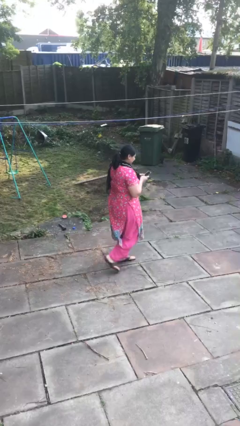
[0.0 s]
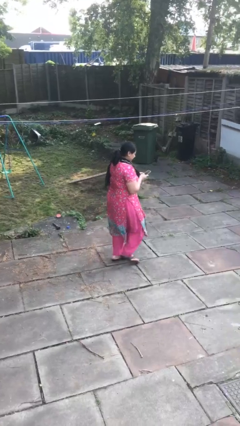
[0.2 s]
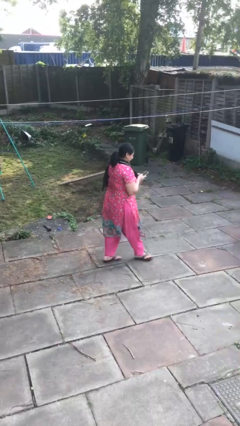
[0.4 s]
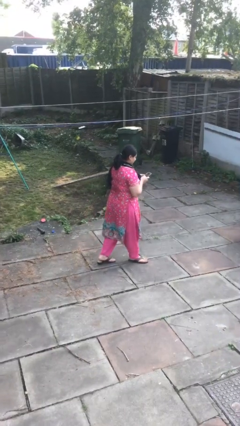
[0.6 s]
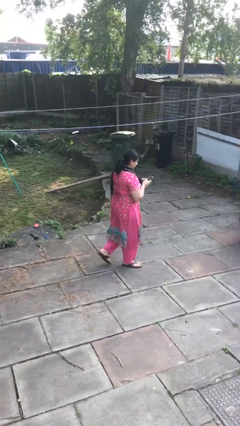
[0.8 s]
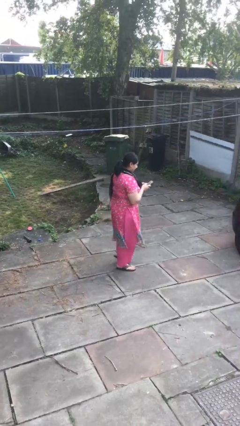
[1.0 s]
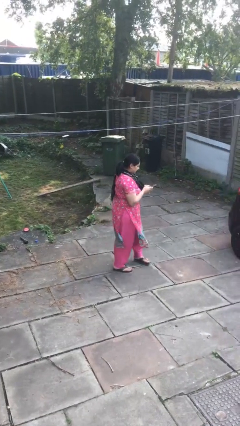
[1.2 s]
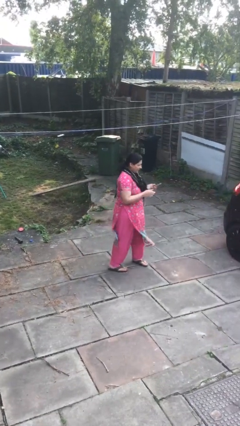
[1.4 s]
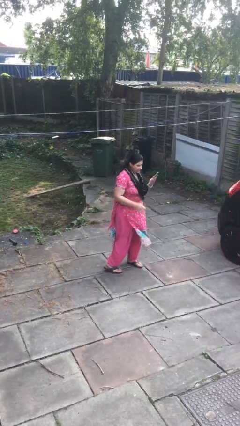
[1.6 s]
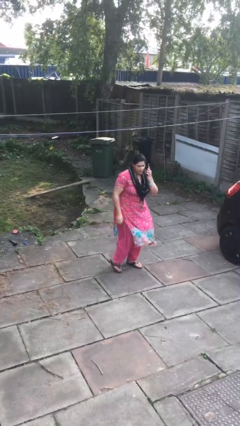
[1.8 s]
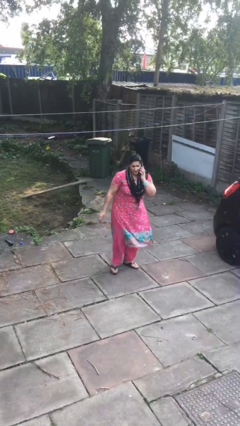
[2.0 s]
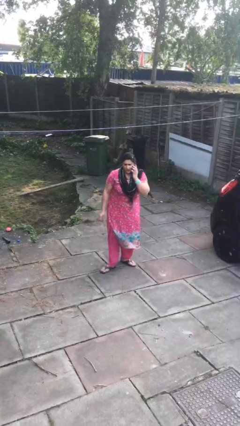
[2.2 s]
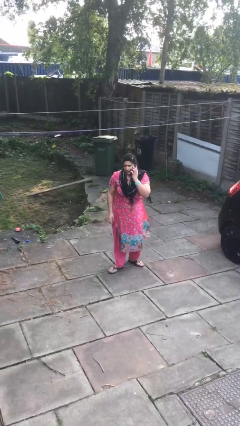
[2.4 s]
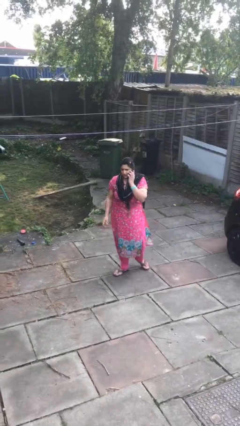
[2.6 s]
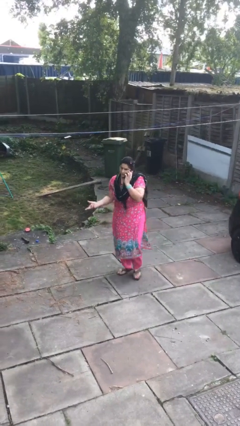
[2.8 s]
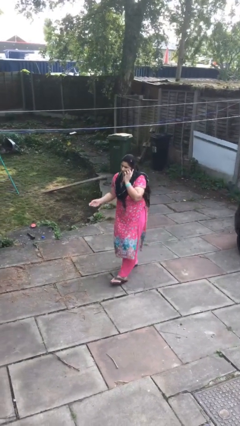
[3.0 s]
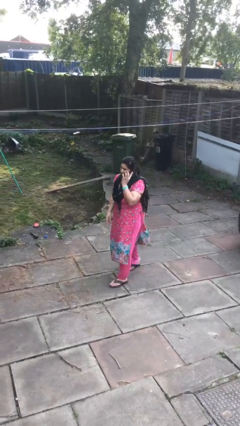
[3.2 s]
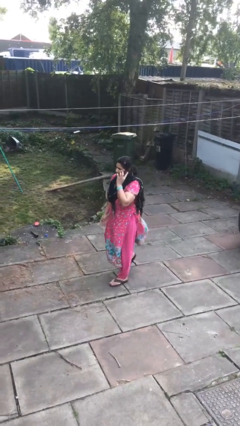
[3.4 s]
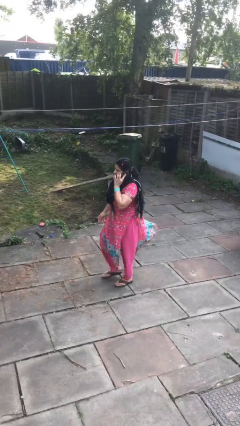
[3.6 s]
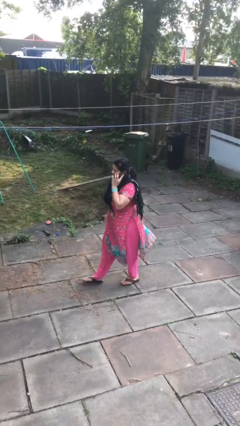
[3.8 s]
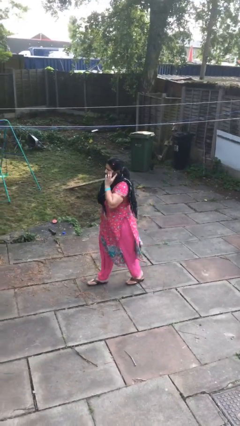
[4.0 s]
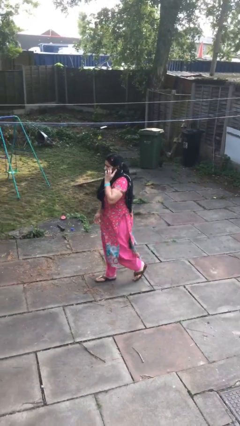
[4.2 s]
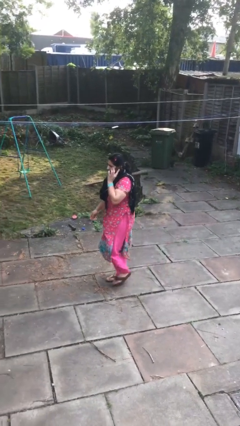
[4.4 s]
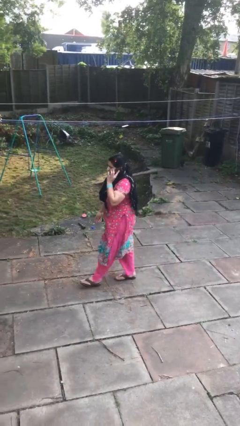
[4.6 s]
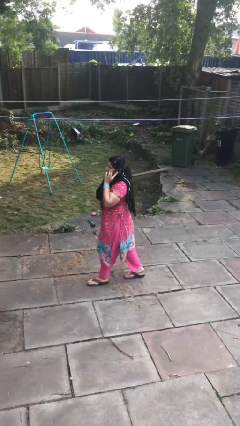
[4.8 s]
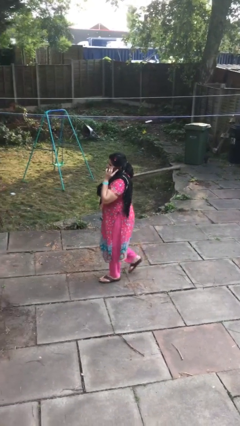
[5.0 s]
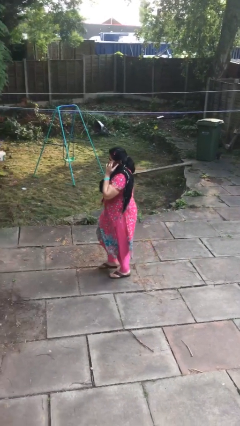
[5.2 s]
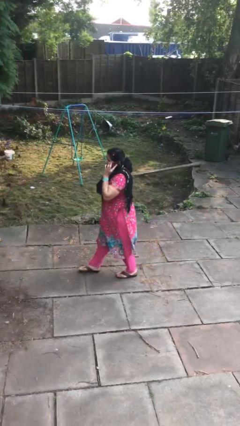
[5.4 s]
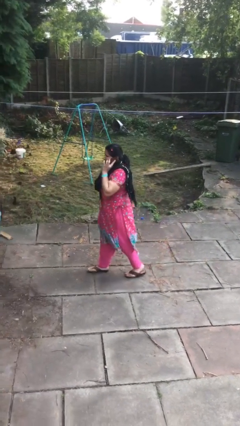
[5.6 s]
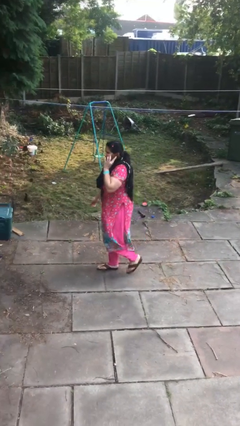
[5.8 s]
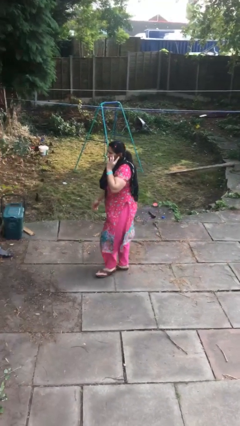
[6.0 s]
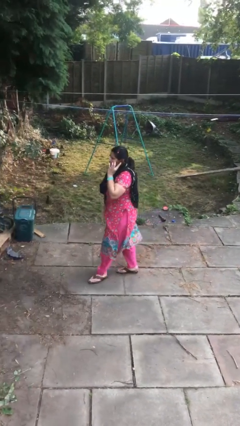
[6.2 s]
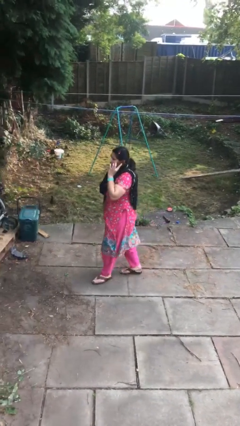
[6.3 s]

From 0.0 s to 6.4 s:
person talks on phone

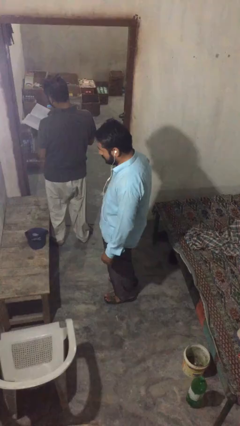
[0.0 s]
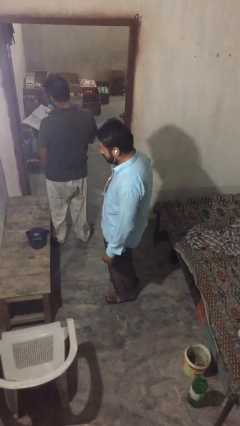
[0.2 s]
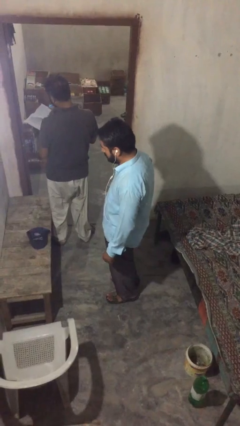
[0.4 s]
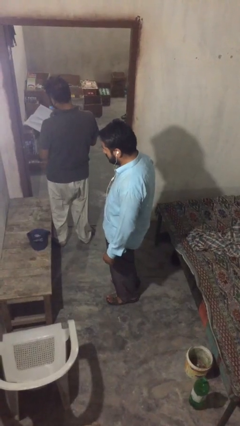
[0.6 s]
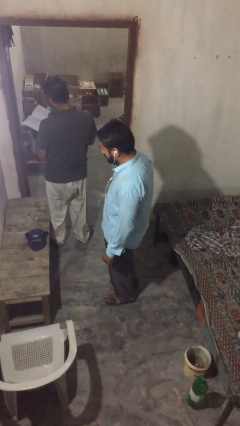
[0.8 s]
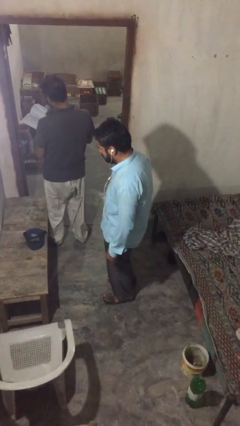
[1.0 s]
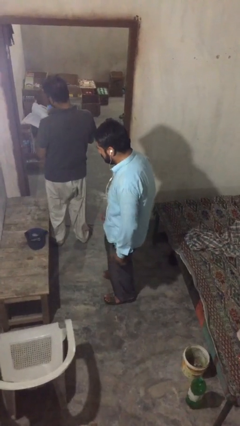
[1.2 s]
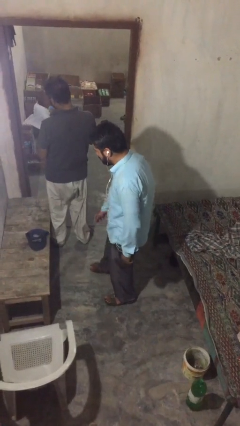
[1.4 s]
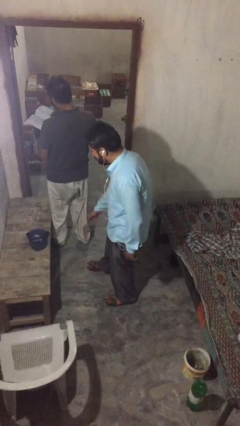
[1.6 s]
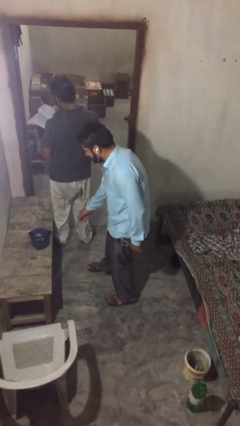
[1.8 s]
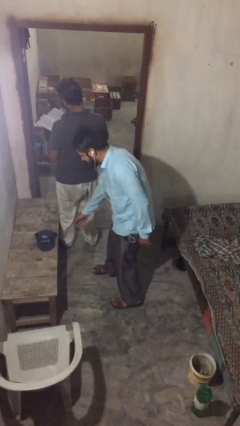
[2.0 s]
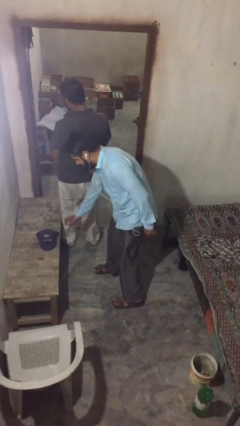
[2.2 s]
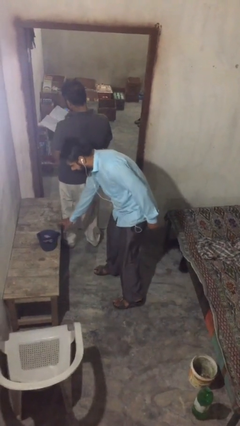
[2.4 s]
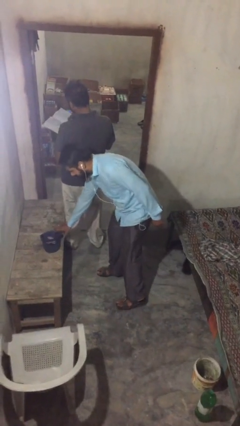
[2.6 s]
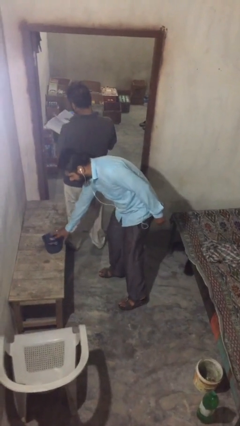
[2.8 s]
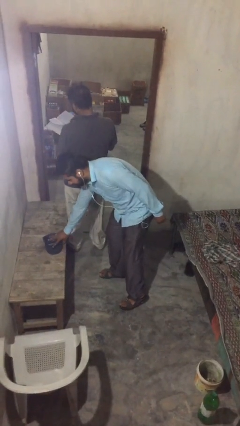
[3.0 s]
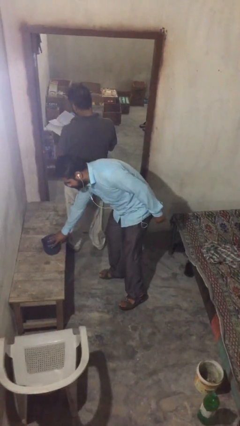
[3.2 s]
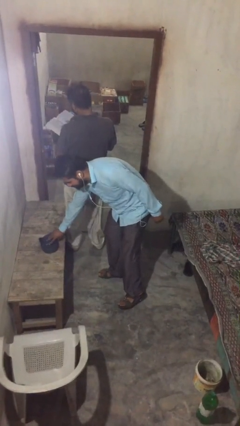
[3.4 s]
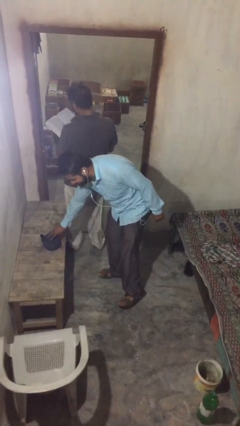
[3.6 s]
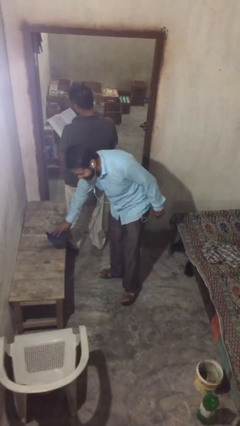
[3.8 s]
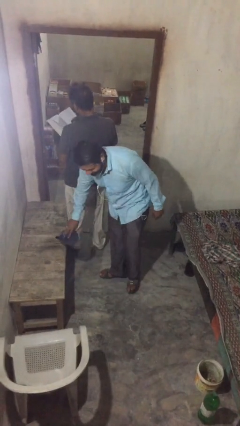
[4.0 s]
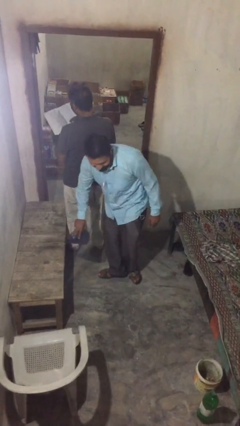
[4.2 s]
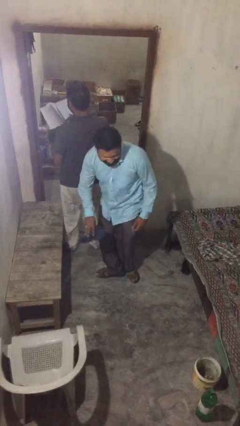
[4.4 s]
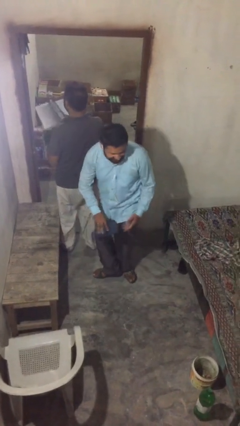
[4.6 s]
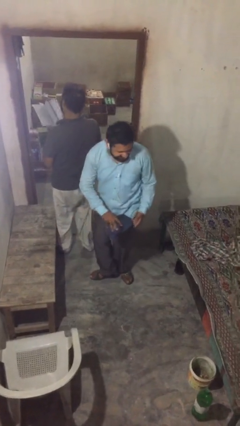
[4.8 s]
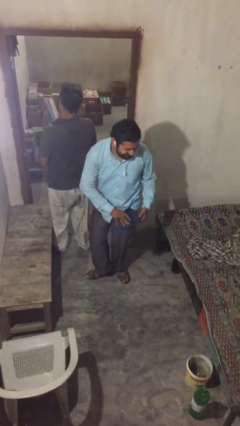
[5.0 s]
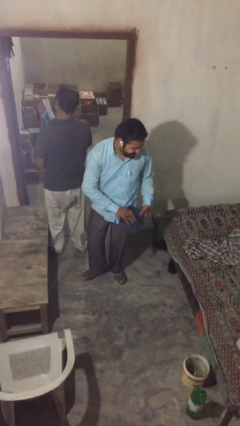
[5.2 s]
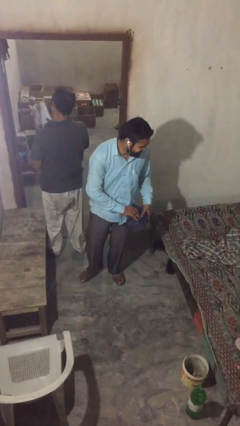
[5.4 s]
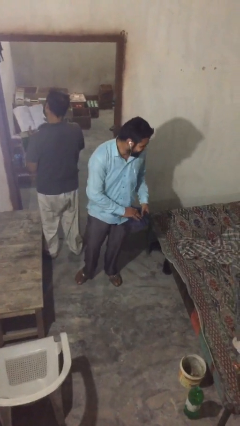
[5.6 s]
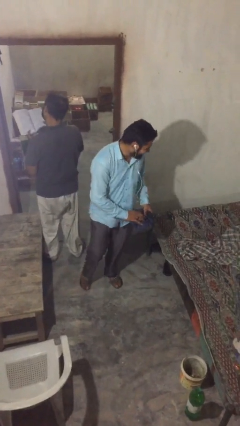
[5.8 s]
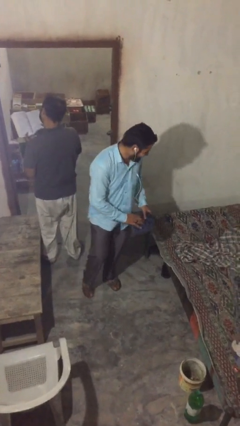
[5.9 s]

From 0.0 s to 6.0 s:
person steals object from person

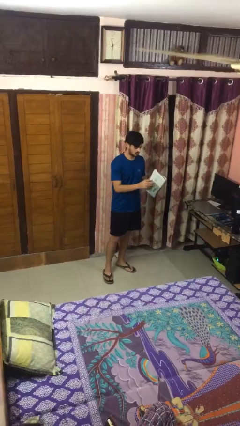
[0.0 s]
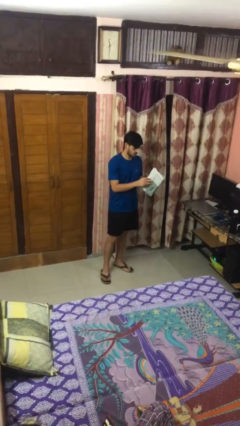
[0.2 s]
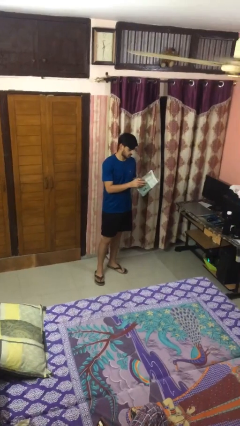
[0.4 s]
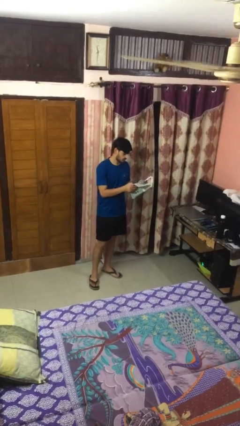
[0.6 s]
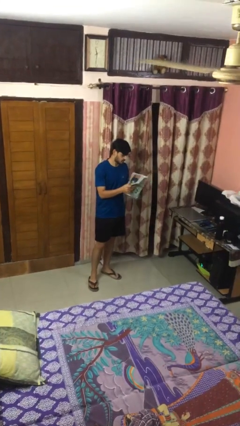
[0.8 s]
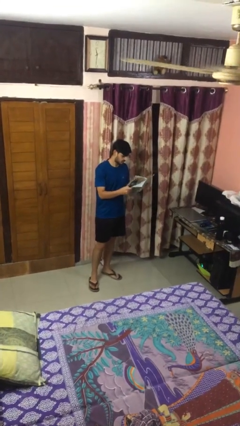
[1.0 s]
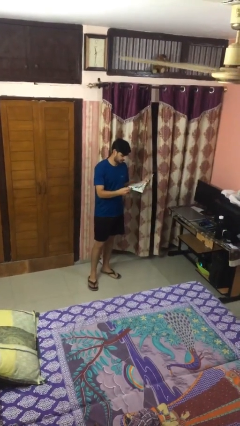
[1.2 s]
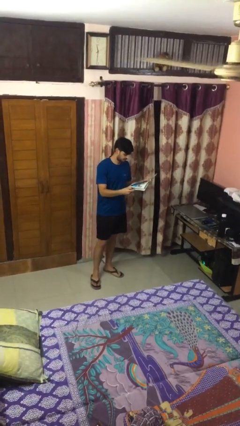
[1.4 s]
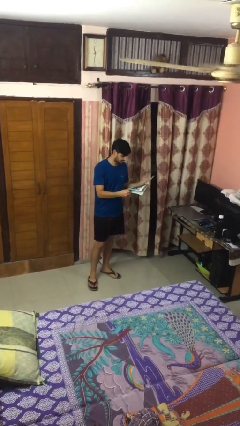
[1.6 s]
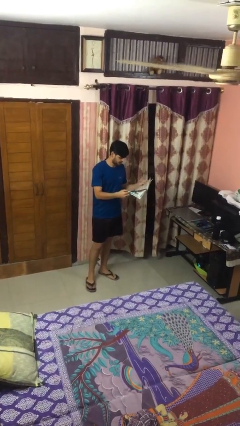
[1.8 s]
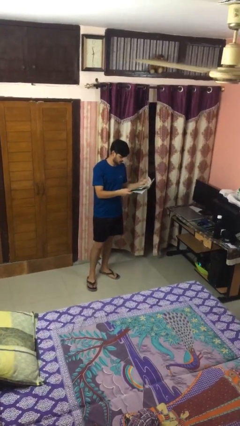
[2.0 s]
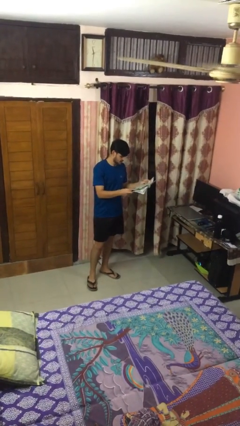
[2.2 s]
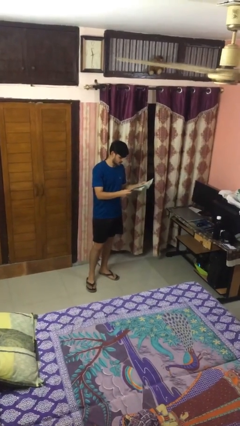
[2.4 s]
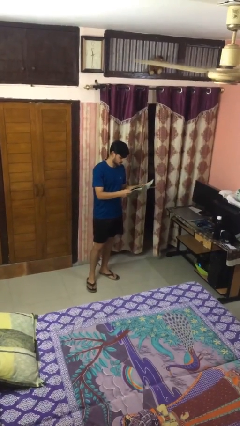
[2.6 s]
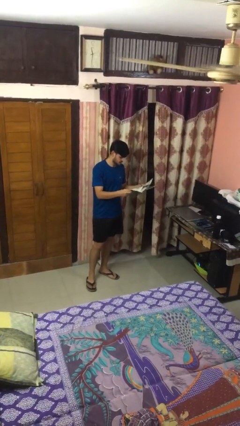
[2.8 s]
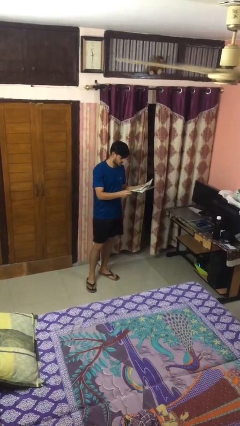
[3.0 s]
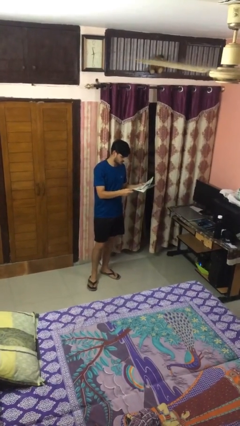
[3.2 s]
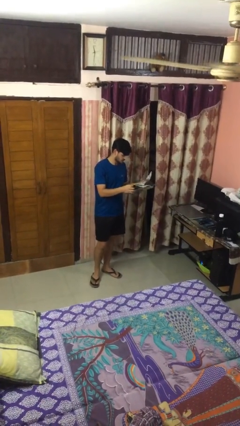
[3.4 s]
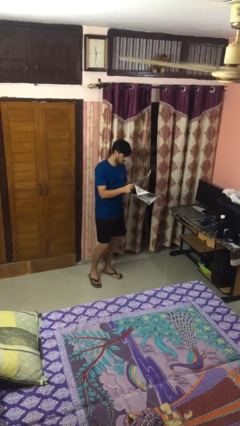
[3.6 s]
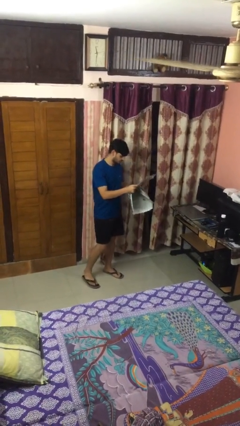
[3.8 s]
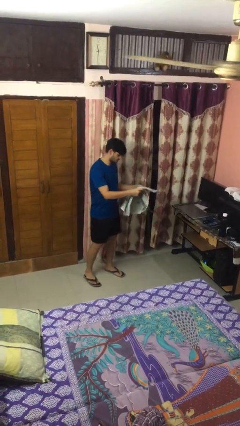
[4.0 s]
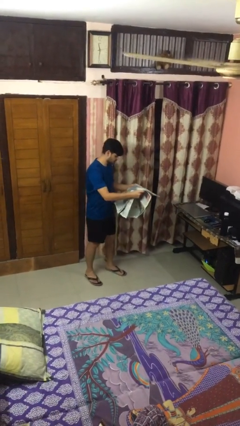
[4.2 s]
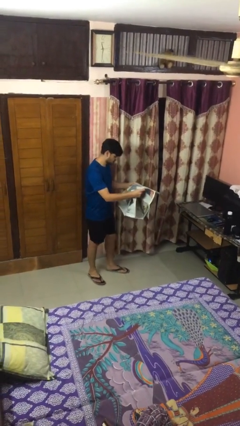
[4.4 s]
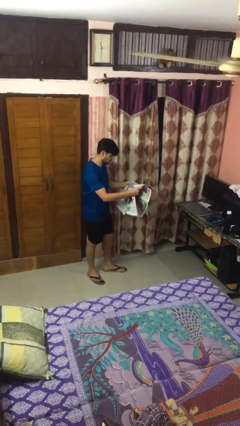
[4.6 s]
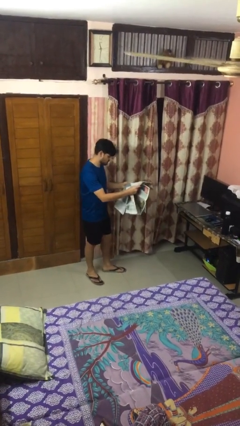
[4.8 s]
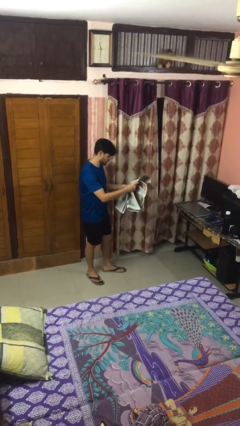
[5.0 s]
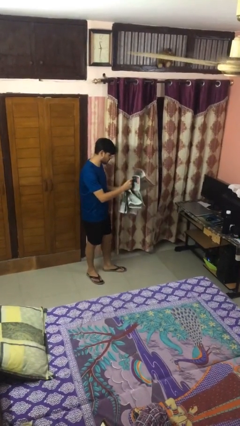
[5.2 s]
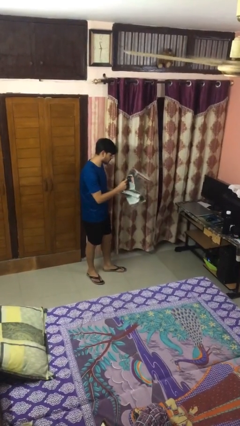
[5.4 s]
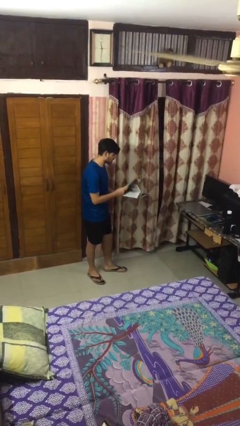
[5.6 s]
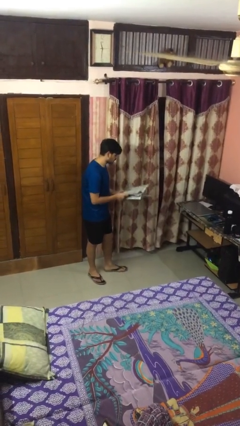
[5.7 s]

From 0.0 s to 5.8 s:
person reads newspaper
